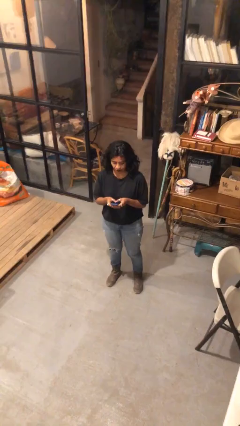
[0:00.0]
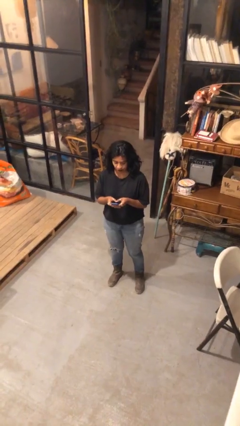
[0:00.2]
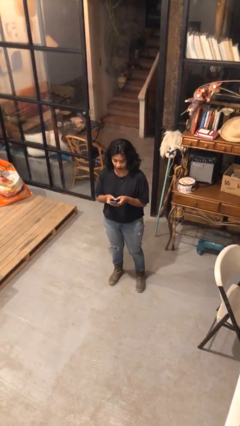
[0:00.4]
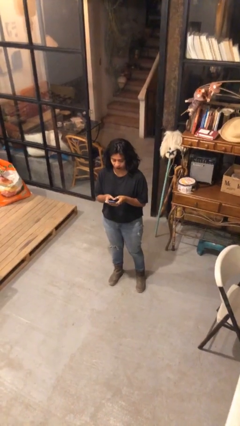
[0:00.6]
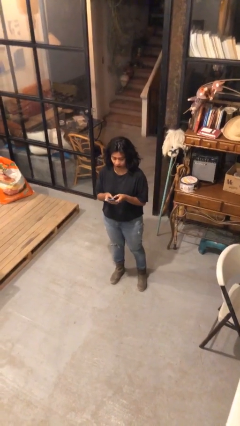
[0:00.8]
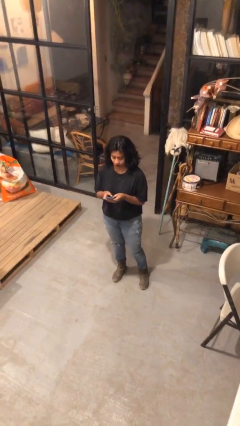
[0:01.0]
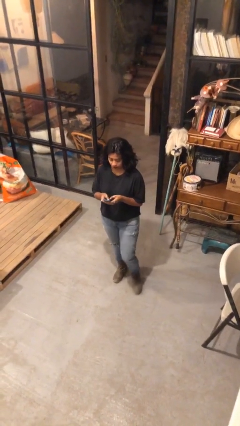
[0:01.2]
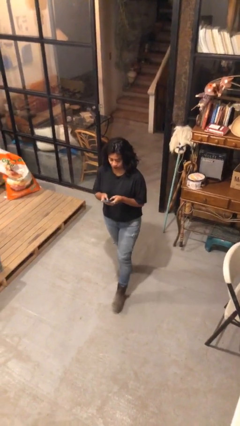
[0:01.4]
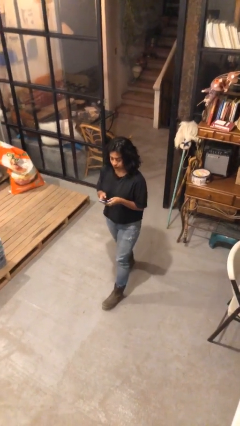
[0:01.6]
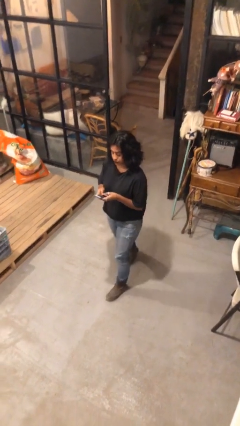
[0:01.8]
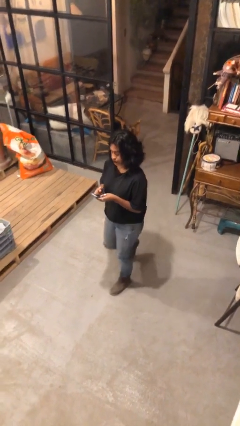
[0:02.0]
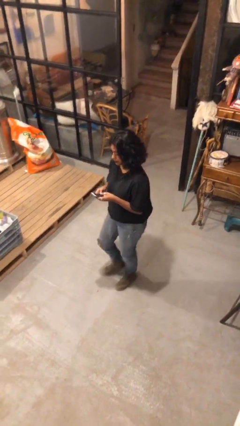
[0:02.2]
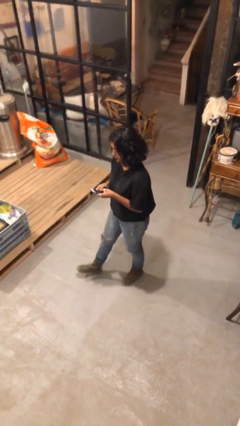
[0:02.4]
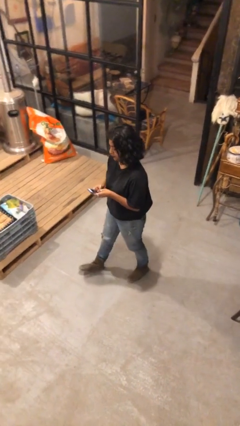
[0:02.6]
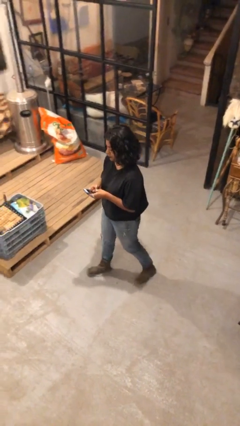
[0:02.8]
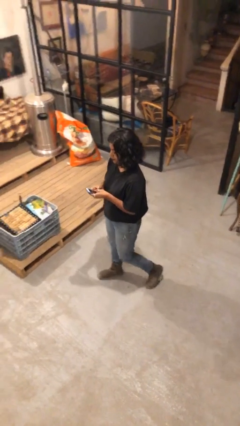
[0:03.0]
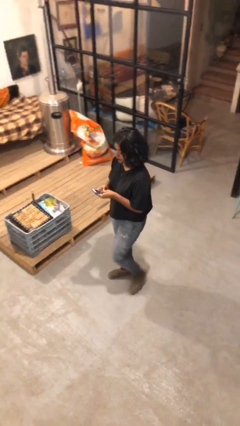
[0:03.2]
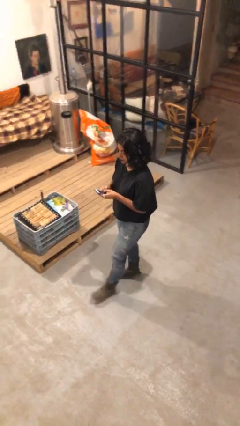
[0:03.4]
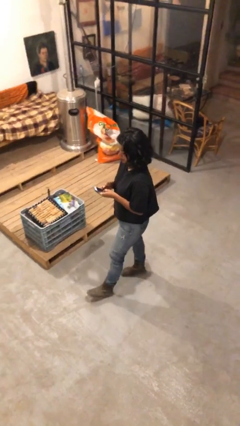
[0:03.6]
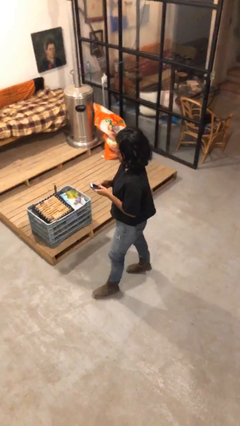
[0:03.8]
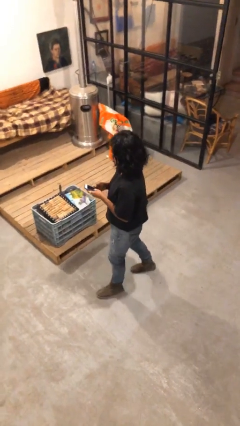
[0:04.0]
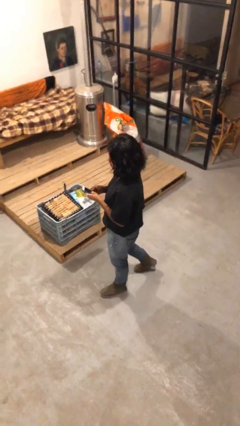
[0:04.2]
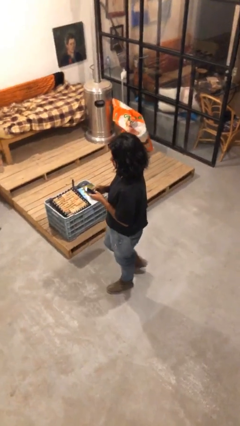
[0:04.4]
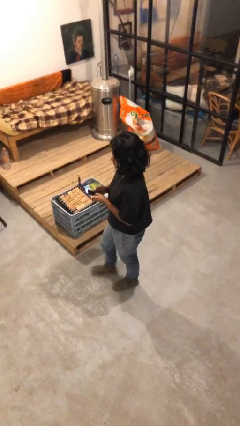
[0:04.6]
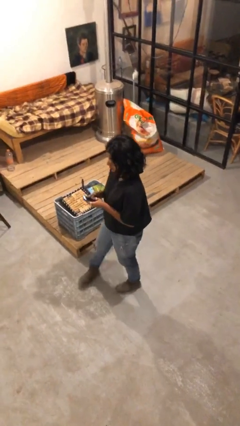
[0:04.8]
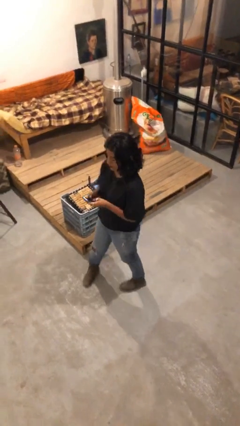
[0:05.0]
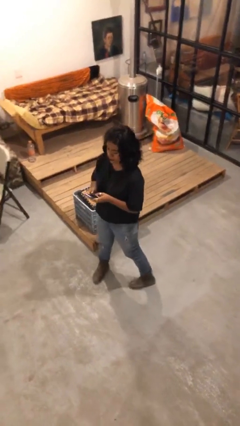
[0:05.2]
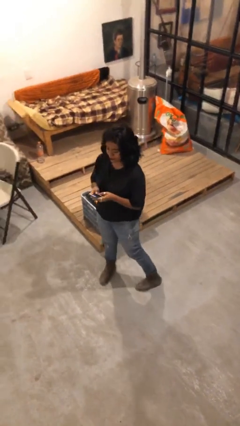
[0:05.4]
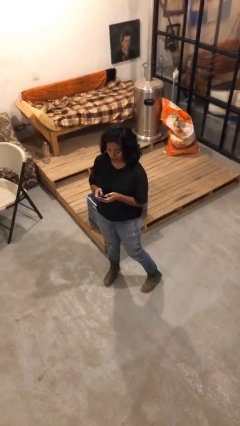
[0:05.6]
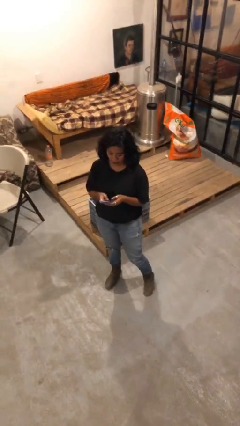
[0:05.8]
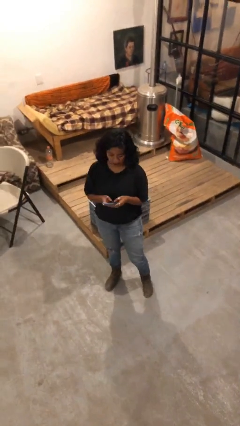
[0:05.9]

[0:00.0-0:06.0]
person texts on phone

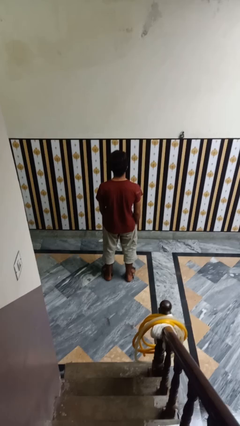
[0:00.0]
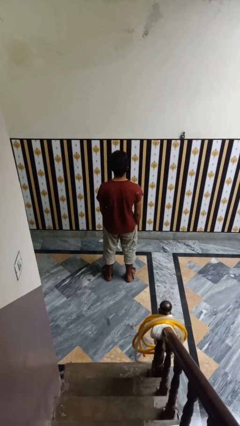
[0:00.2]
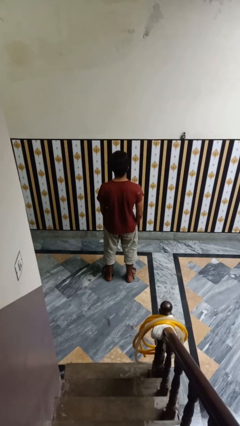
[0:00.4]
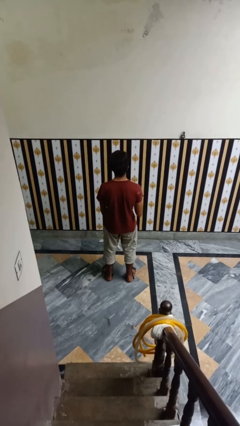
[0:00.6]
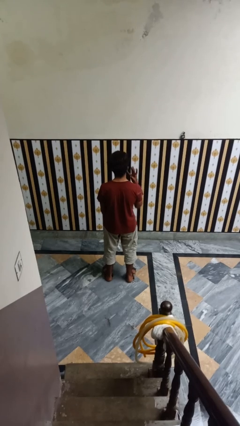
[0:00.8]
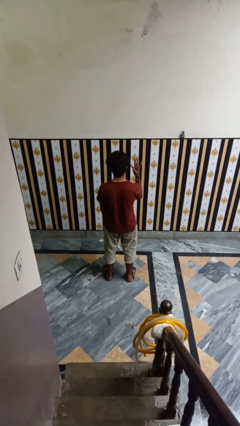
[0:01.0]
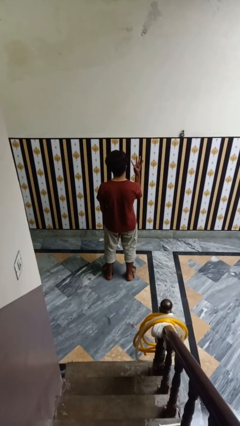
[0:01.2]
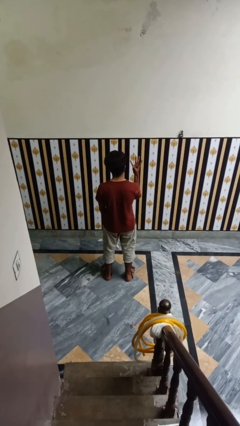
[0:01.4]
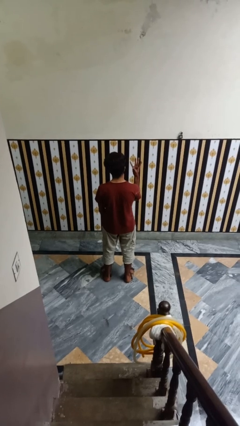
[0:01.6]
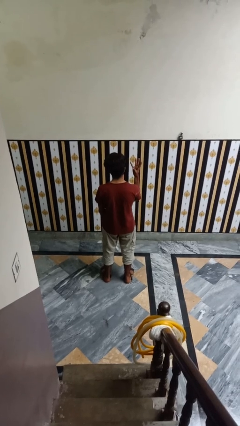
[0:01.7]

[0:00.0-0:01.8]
person gestures number four

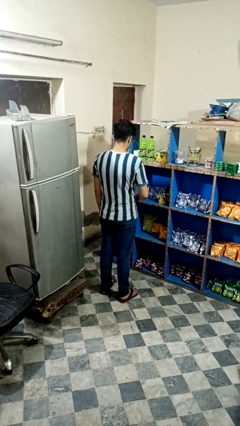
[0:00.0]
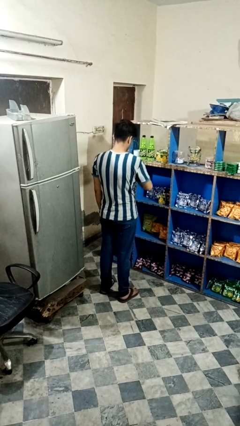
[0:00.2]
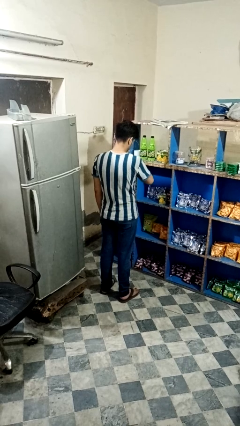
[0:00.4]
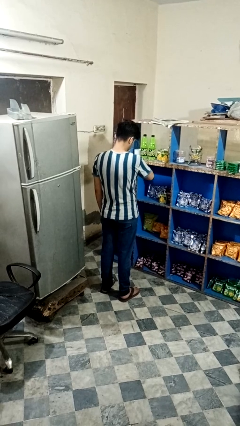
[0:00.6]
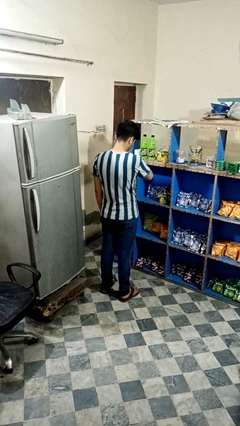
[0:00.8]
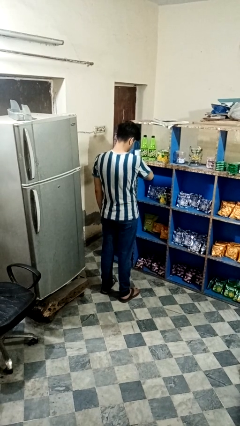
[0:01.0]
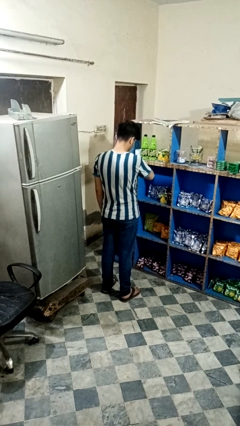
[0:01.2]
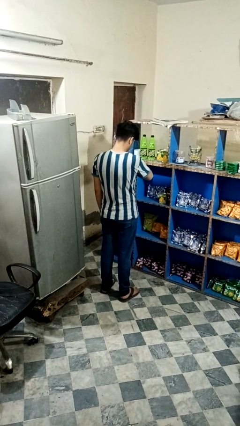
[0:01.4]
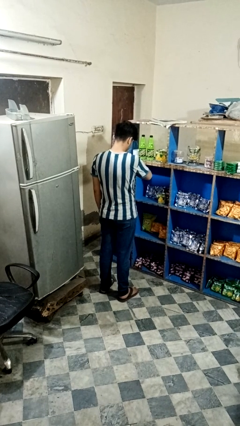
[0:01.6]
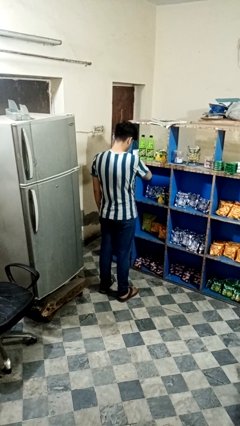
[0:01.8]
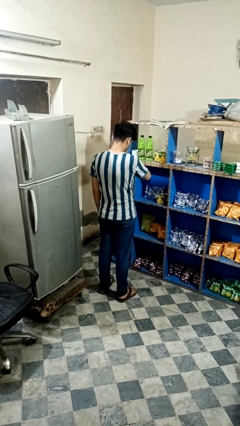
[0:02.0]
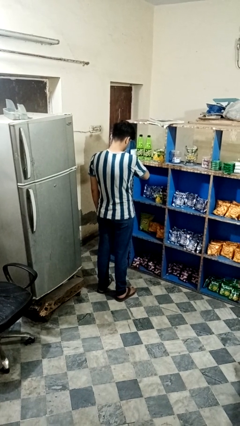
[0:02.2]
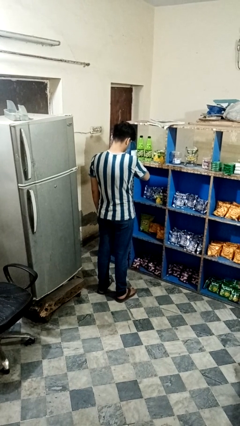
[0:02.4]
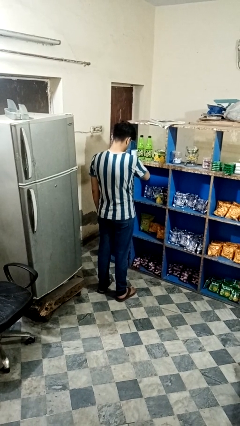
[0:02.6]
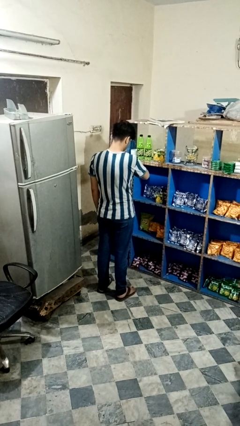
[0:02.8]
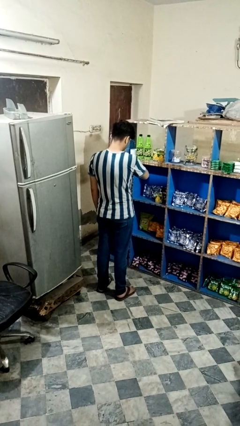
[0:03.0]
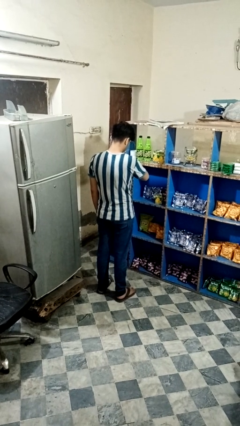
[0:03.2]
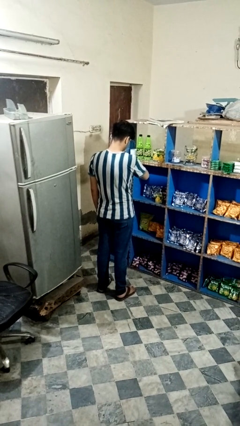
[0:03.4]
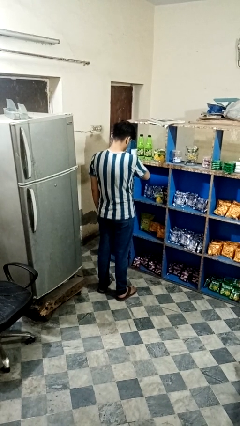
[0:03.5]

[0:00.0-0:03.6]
person looks at wristwatch

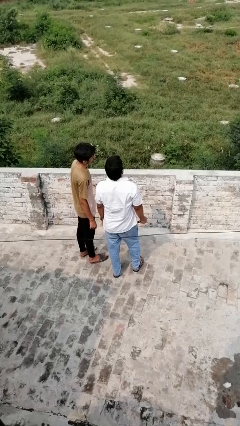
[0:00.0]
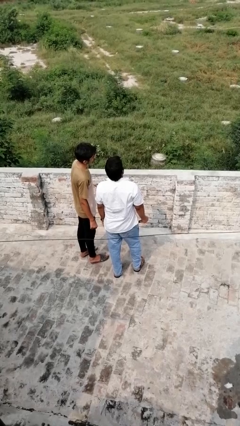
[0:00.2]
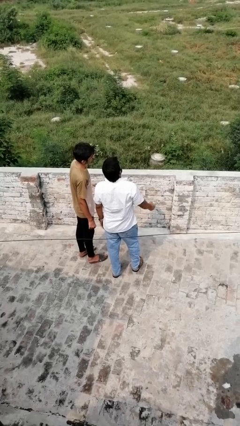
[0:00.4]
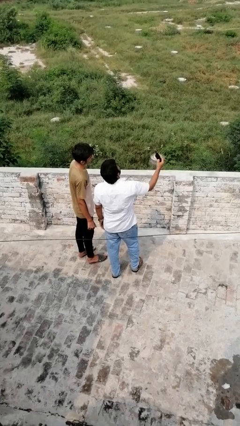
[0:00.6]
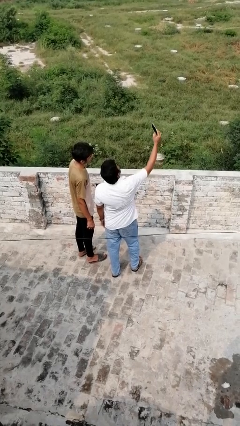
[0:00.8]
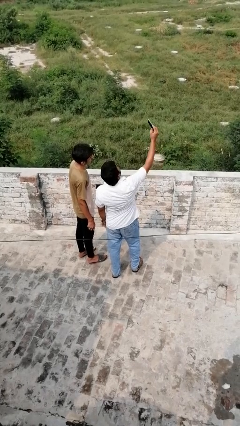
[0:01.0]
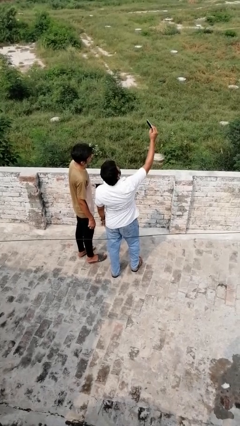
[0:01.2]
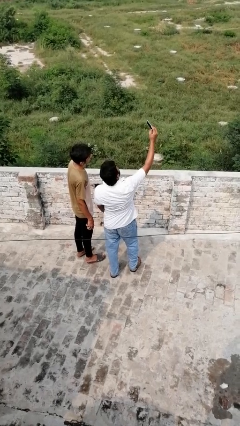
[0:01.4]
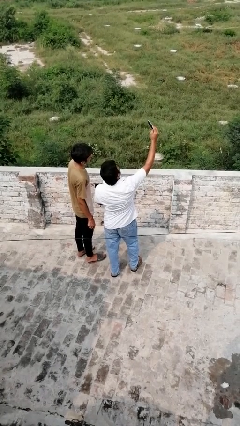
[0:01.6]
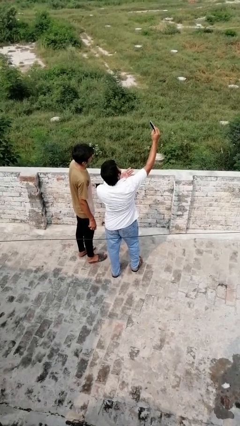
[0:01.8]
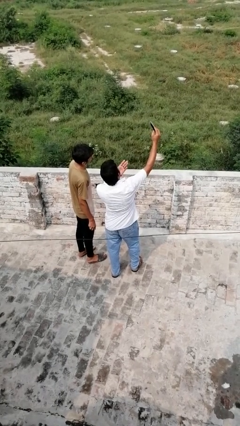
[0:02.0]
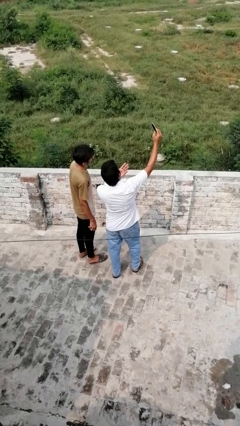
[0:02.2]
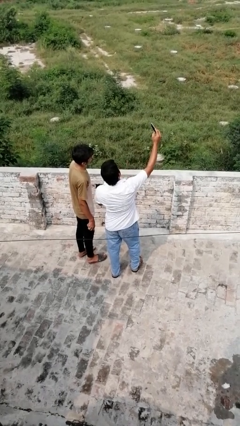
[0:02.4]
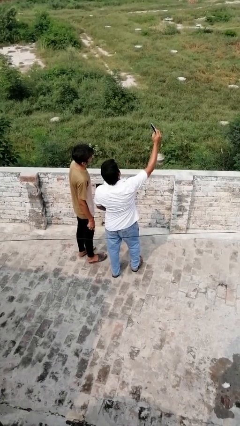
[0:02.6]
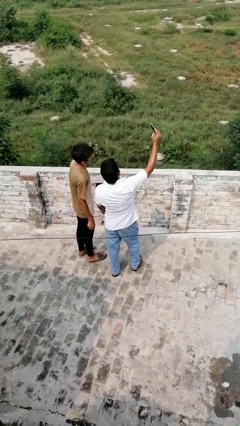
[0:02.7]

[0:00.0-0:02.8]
person takes selfie with person

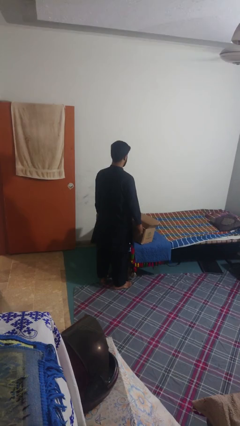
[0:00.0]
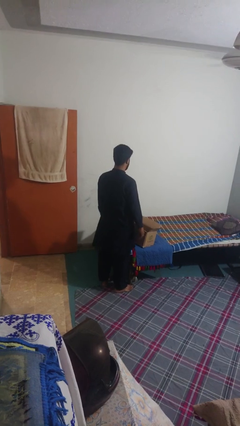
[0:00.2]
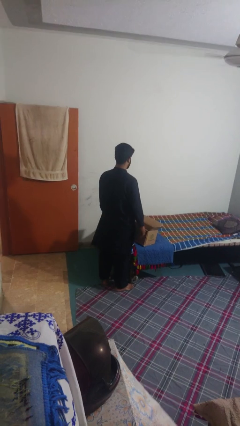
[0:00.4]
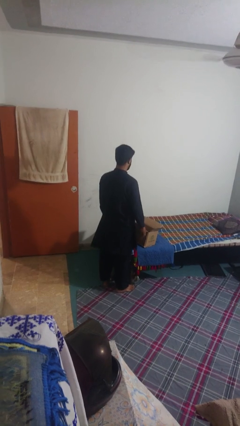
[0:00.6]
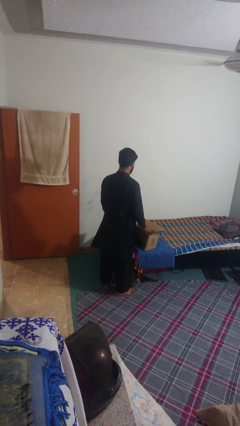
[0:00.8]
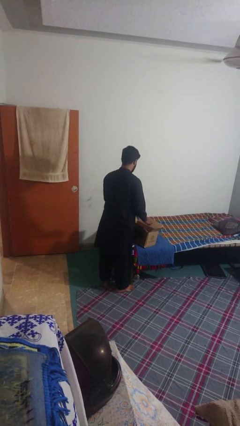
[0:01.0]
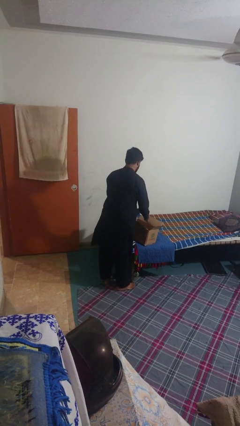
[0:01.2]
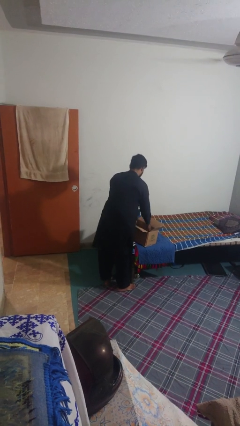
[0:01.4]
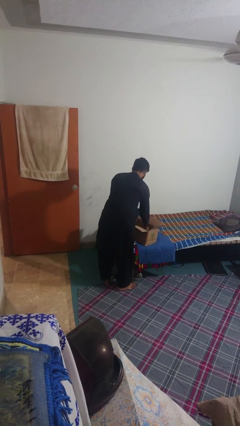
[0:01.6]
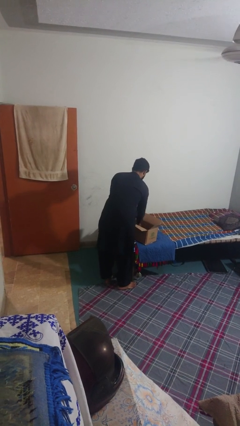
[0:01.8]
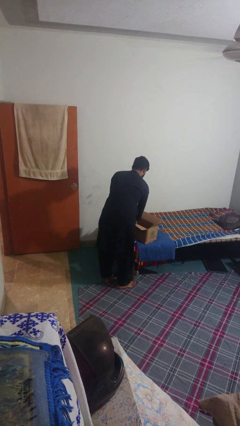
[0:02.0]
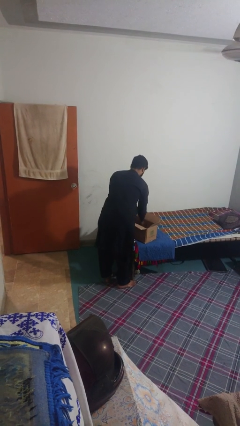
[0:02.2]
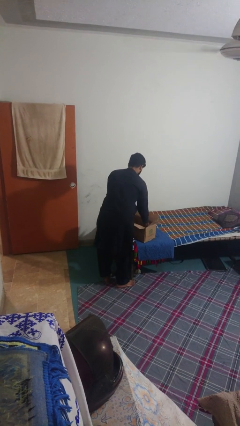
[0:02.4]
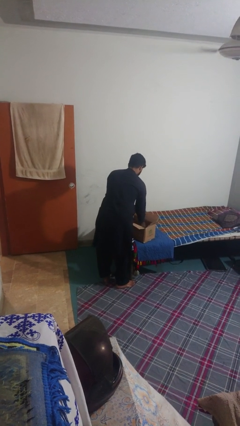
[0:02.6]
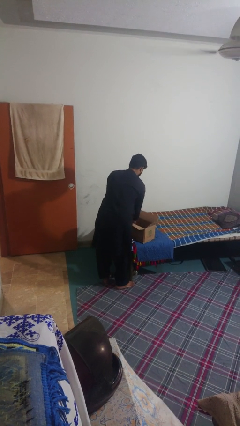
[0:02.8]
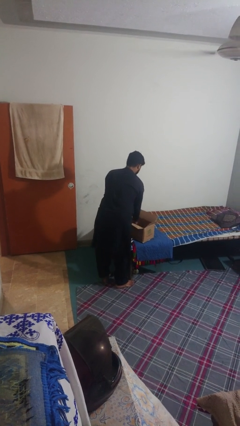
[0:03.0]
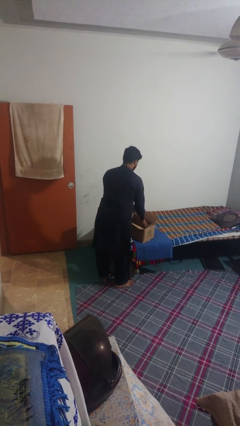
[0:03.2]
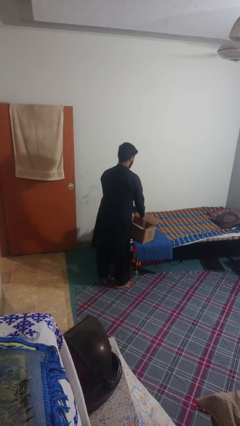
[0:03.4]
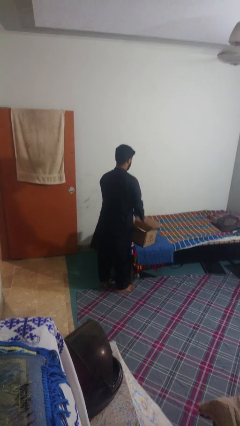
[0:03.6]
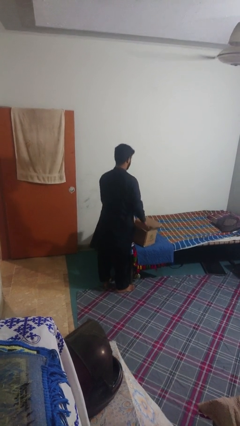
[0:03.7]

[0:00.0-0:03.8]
person searches in box
